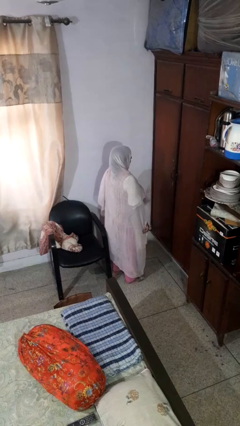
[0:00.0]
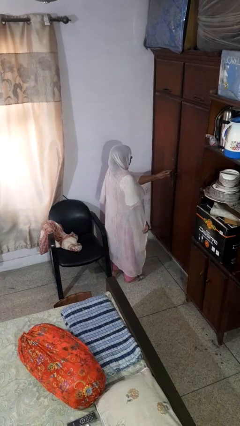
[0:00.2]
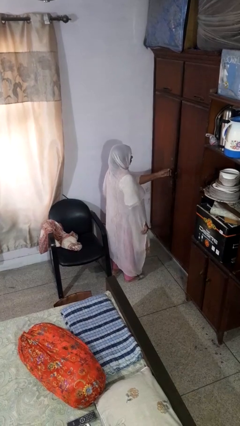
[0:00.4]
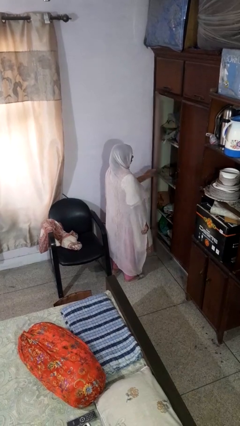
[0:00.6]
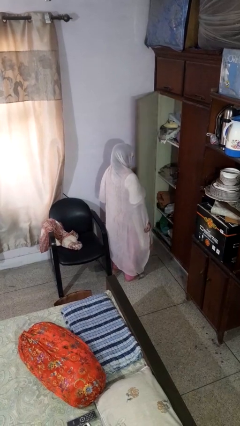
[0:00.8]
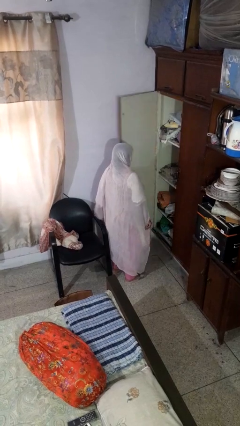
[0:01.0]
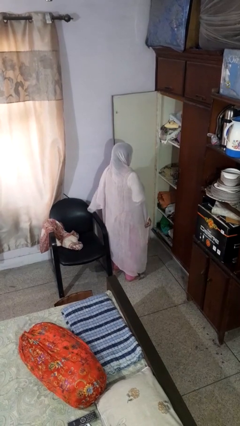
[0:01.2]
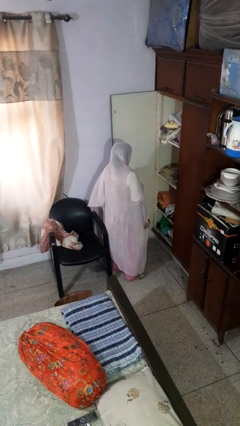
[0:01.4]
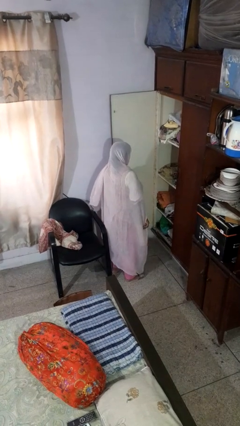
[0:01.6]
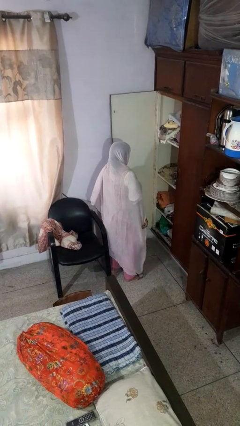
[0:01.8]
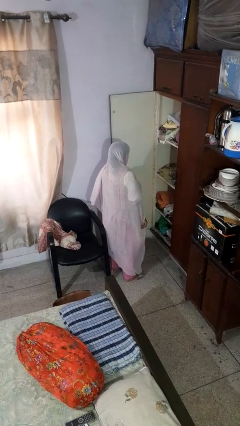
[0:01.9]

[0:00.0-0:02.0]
person opens closet door

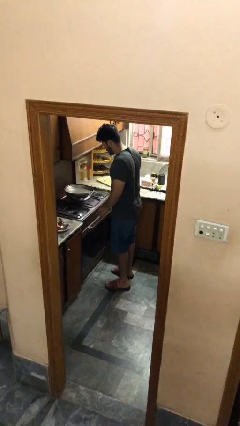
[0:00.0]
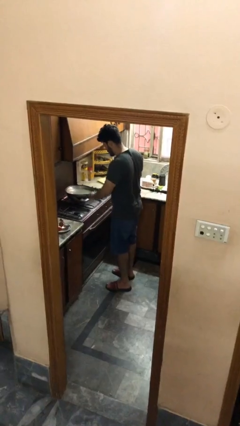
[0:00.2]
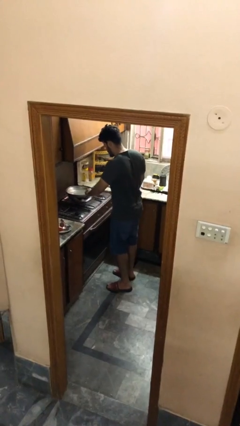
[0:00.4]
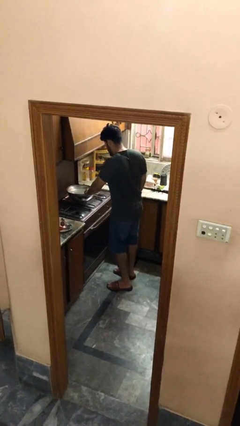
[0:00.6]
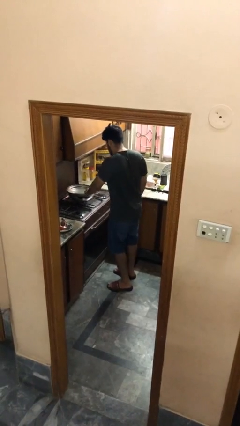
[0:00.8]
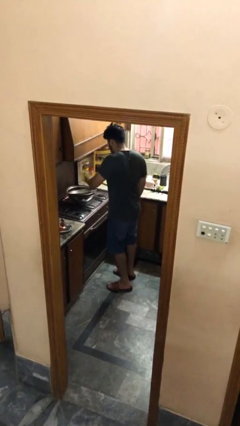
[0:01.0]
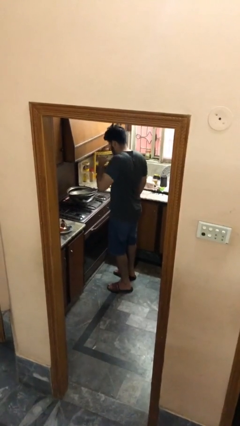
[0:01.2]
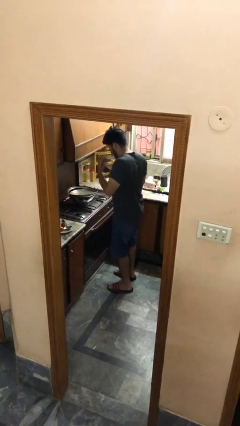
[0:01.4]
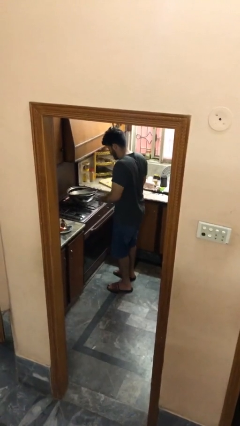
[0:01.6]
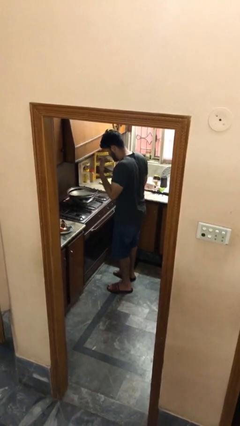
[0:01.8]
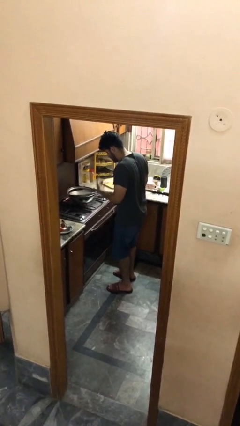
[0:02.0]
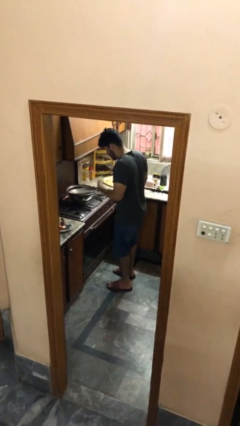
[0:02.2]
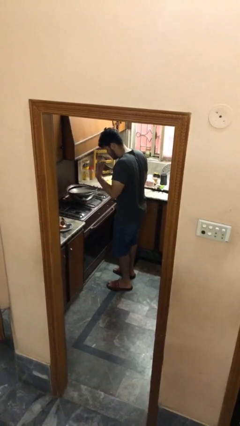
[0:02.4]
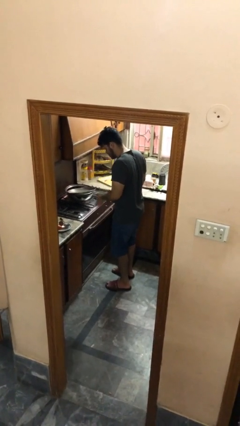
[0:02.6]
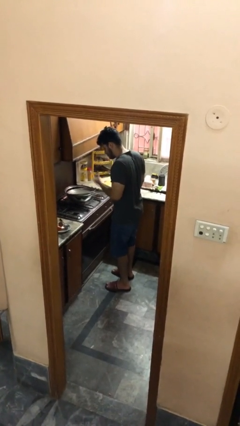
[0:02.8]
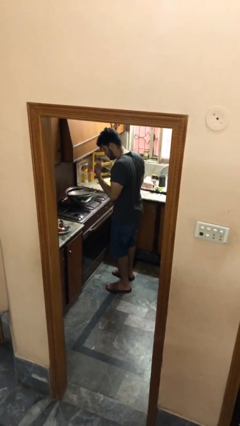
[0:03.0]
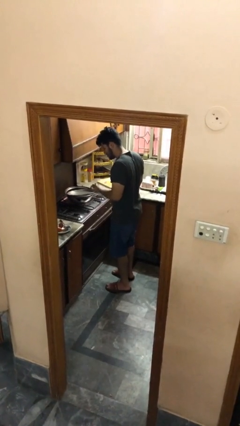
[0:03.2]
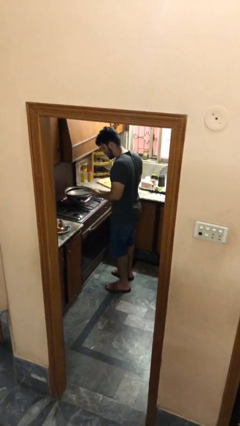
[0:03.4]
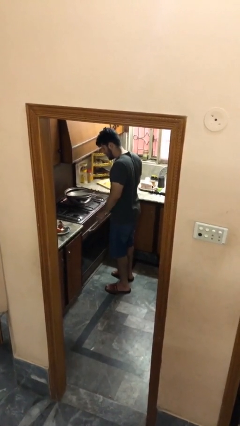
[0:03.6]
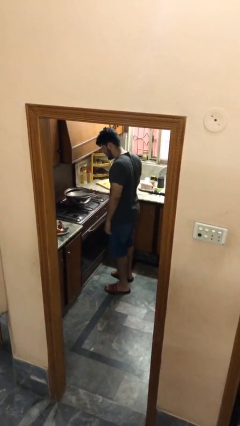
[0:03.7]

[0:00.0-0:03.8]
person burns hand

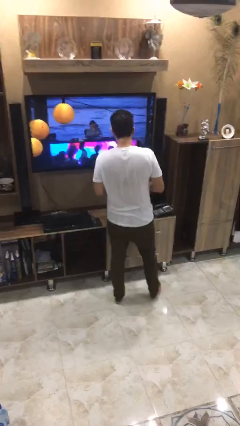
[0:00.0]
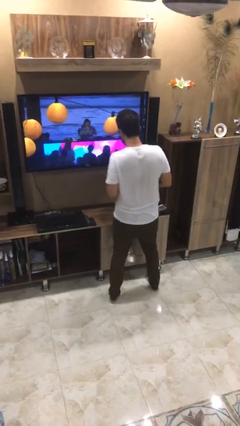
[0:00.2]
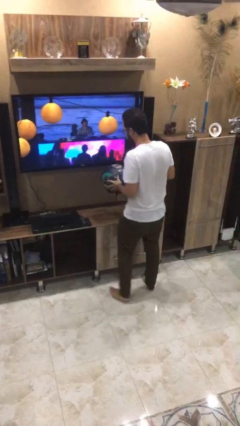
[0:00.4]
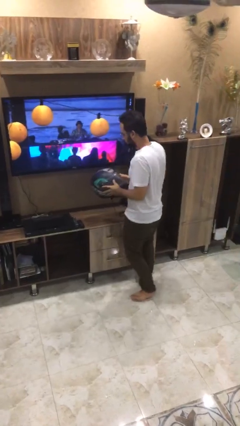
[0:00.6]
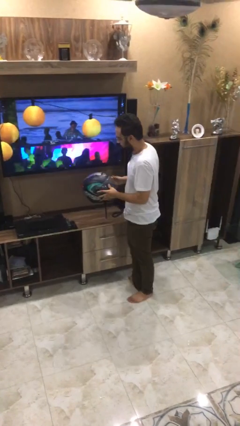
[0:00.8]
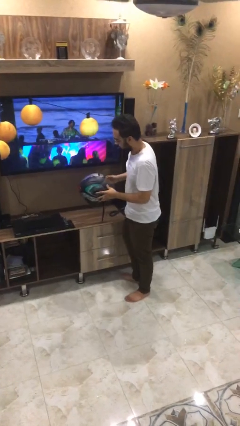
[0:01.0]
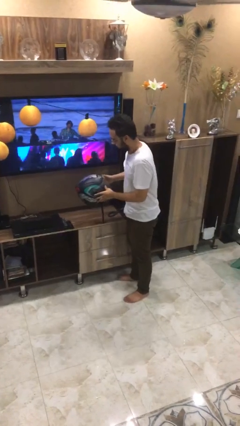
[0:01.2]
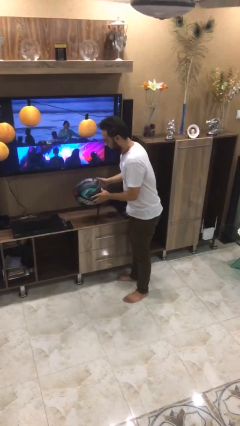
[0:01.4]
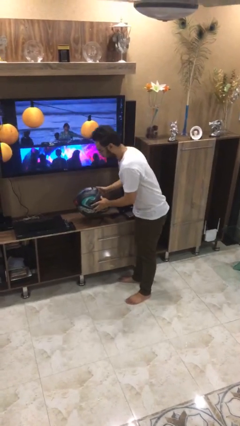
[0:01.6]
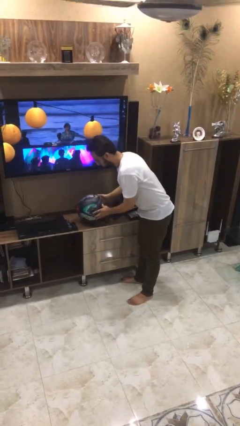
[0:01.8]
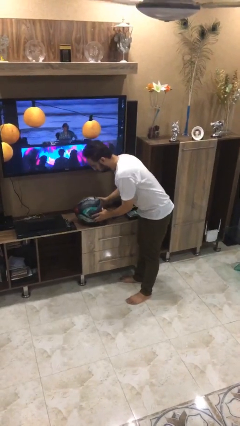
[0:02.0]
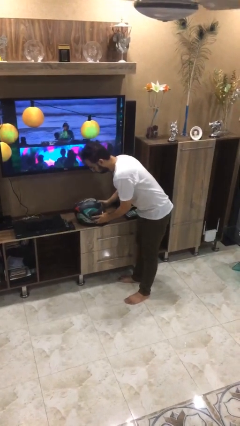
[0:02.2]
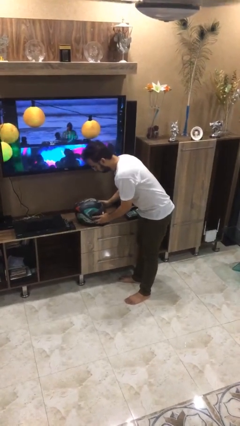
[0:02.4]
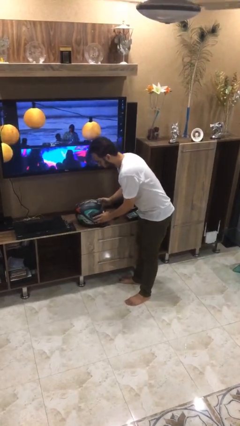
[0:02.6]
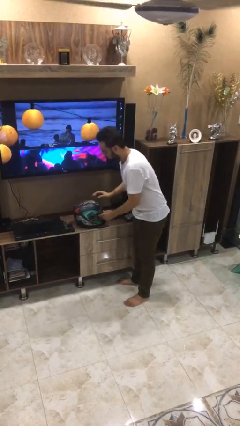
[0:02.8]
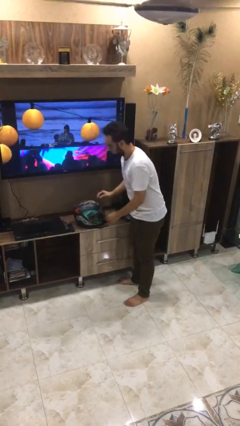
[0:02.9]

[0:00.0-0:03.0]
person puts down object on table

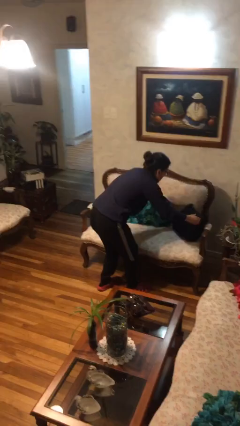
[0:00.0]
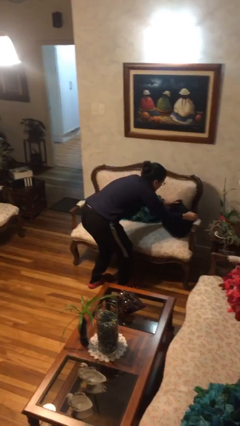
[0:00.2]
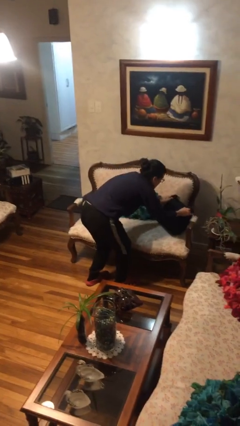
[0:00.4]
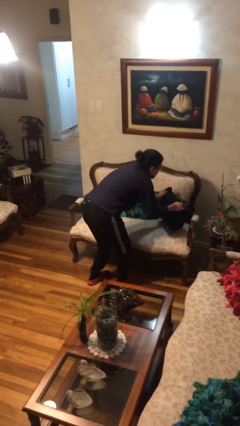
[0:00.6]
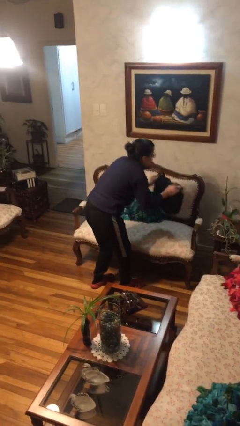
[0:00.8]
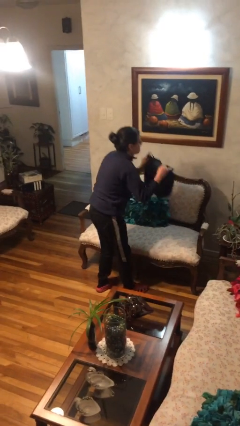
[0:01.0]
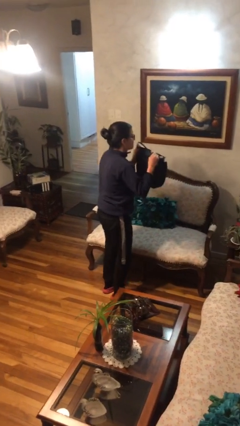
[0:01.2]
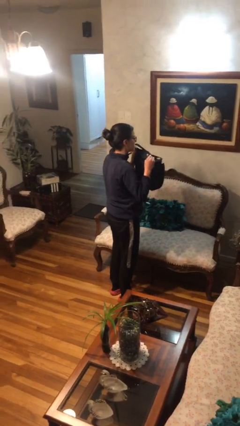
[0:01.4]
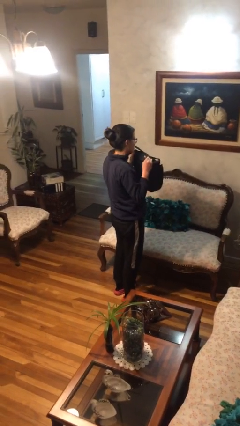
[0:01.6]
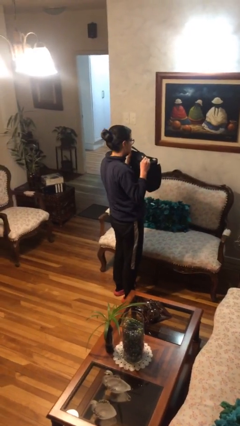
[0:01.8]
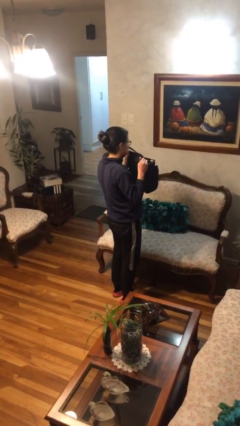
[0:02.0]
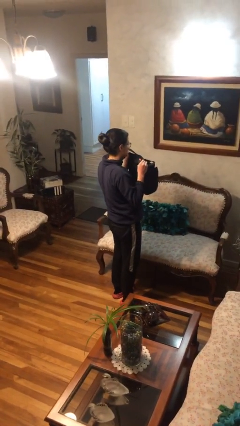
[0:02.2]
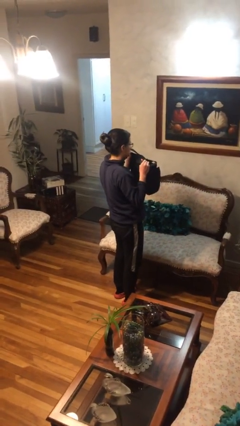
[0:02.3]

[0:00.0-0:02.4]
person picks up object from couch

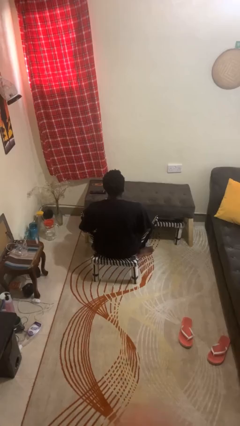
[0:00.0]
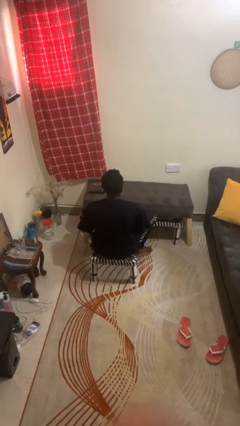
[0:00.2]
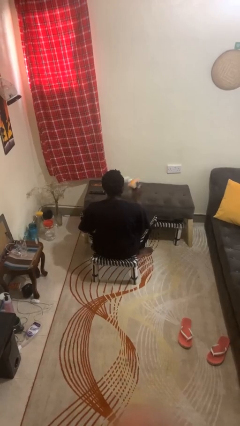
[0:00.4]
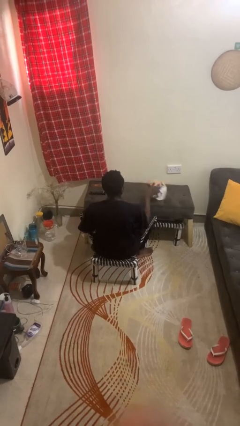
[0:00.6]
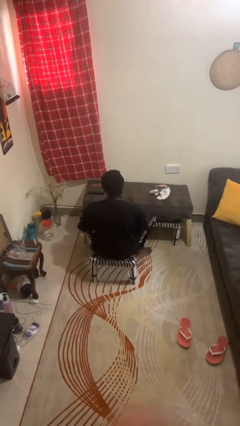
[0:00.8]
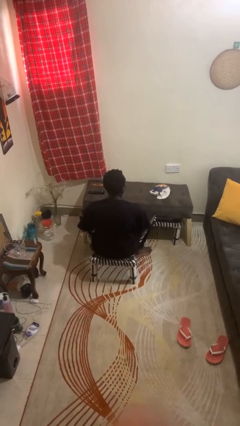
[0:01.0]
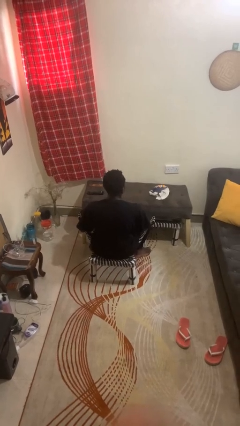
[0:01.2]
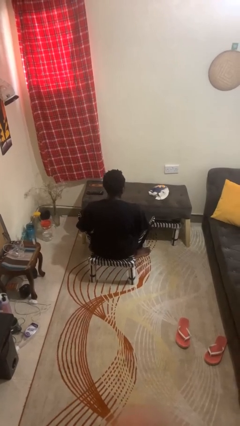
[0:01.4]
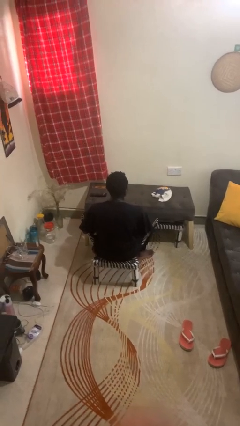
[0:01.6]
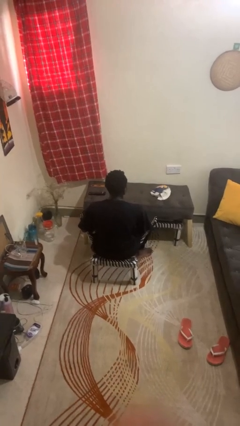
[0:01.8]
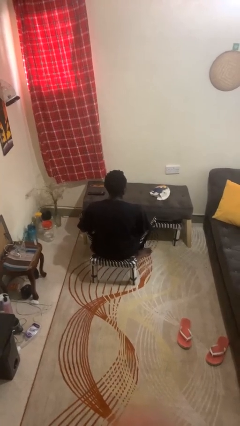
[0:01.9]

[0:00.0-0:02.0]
person throws object on table

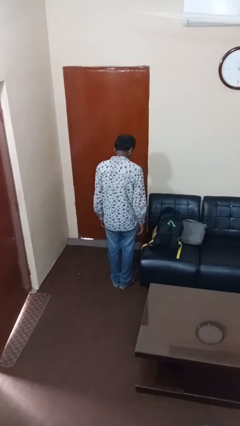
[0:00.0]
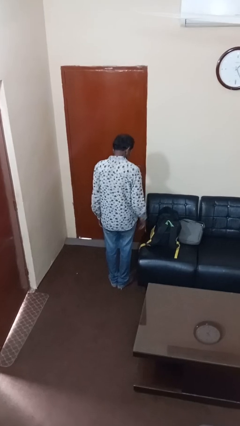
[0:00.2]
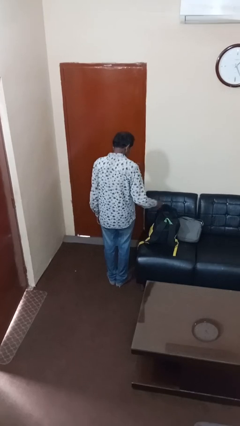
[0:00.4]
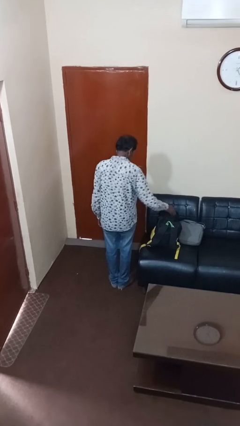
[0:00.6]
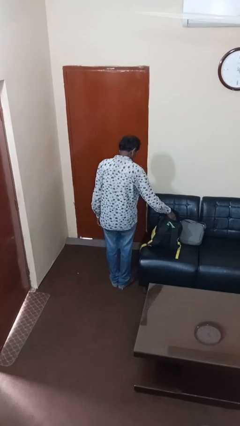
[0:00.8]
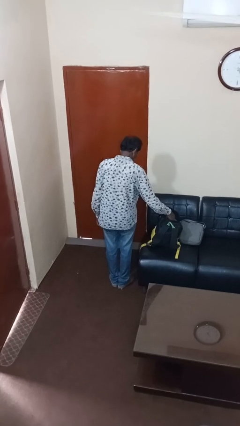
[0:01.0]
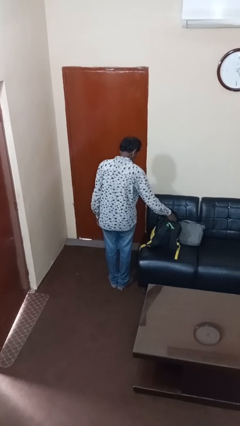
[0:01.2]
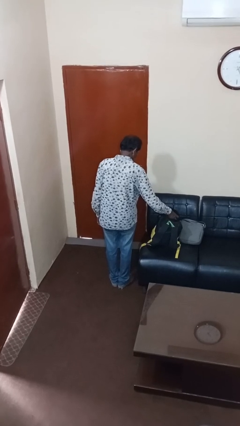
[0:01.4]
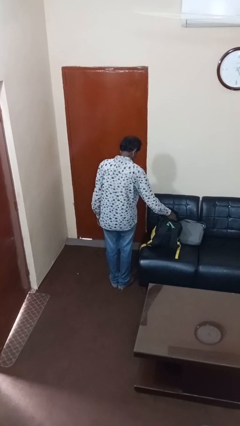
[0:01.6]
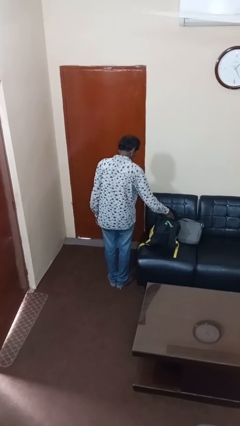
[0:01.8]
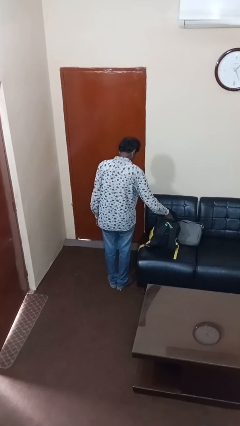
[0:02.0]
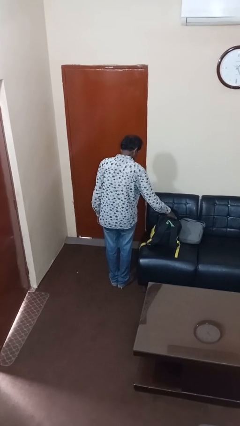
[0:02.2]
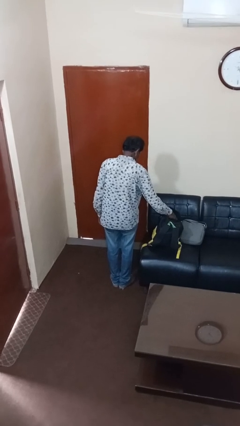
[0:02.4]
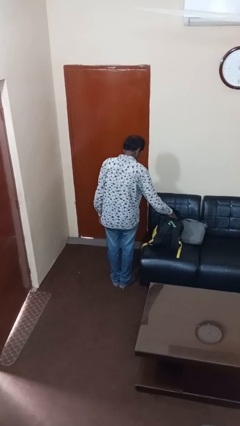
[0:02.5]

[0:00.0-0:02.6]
person searches in backpack

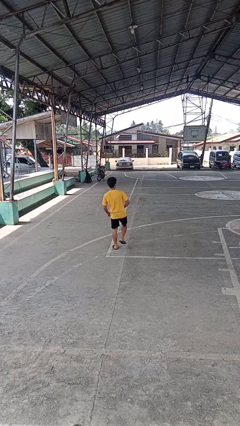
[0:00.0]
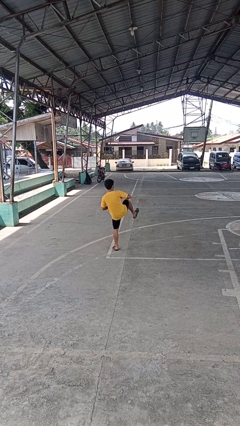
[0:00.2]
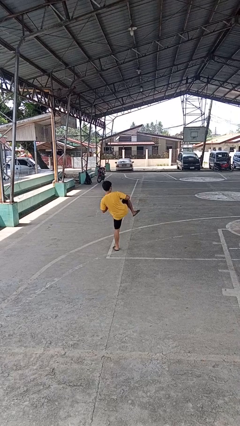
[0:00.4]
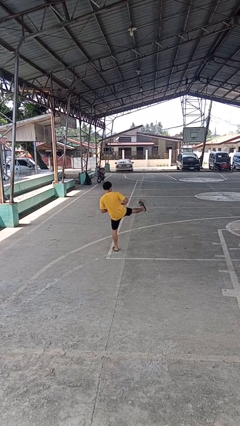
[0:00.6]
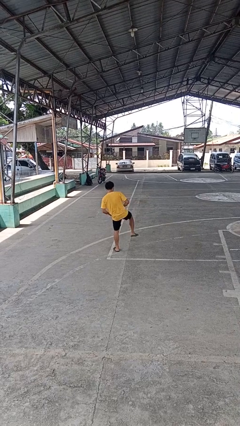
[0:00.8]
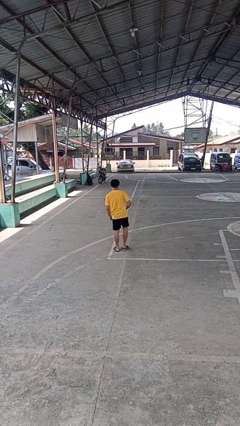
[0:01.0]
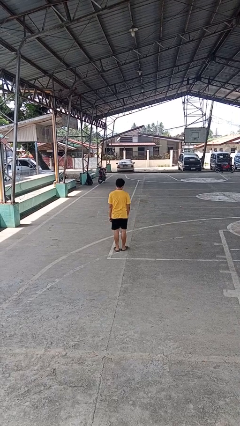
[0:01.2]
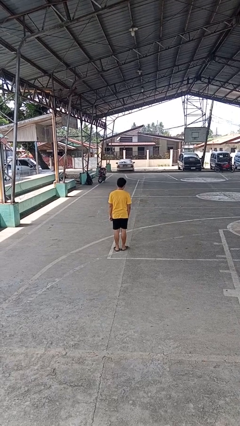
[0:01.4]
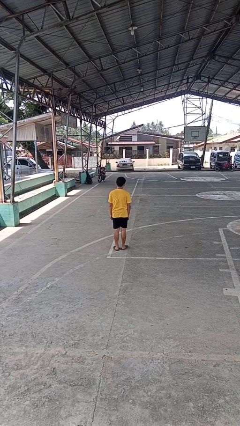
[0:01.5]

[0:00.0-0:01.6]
person karate kicks
